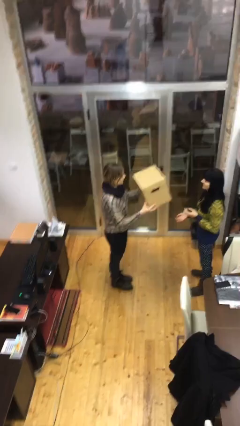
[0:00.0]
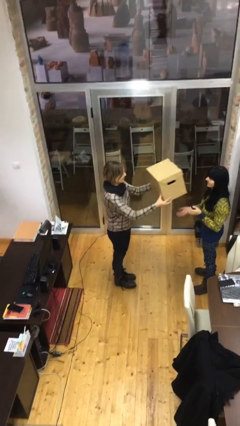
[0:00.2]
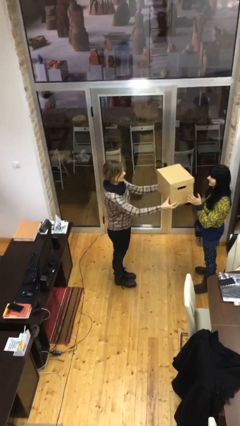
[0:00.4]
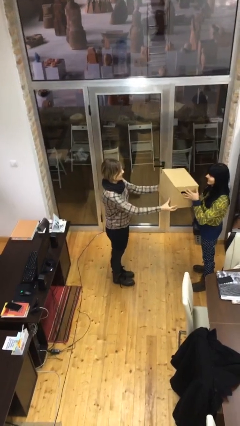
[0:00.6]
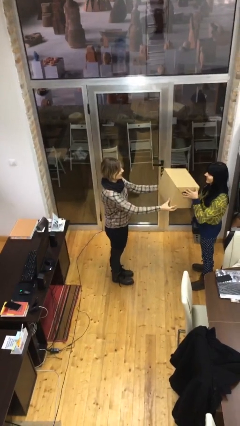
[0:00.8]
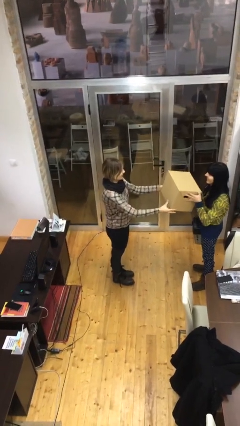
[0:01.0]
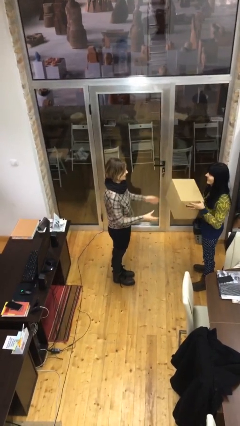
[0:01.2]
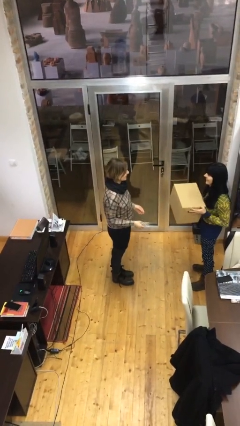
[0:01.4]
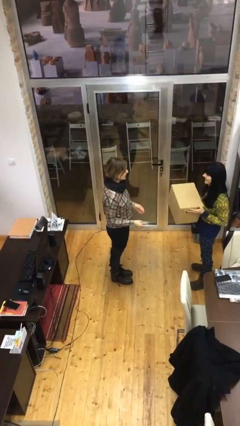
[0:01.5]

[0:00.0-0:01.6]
person transfers object to person

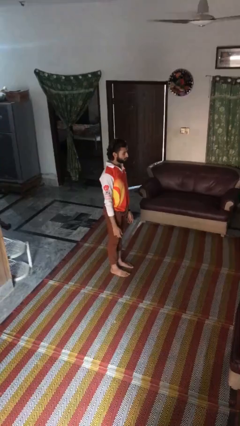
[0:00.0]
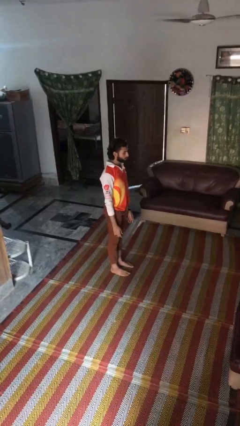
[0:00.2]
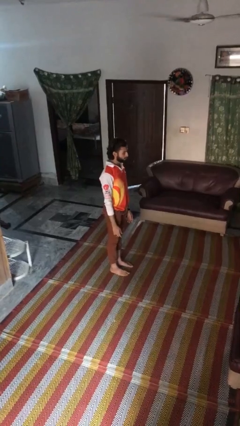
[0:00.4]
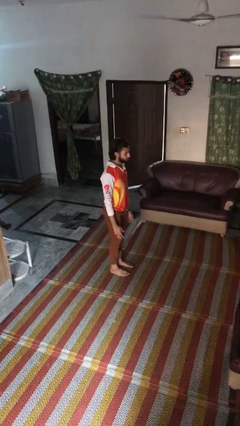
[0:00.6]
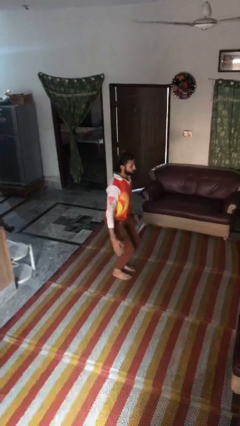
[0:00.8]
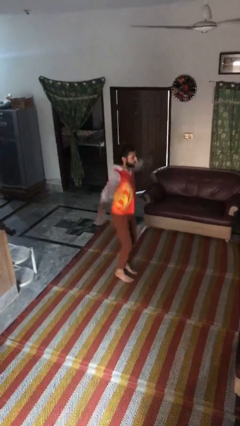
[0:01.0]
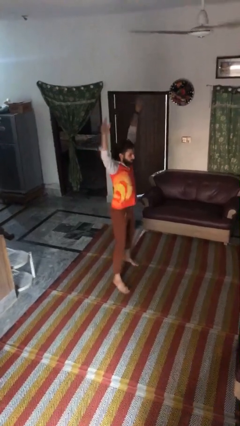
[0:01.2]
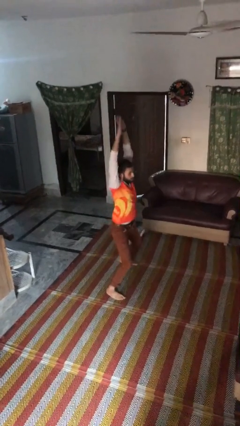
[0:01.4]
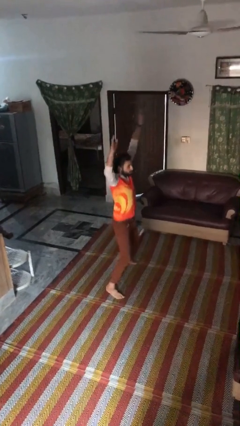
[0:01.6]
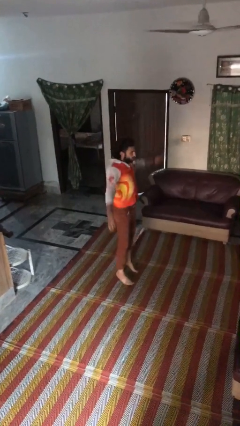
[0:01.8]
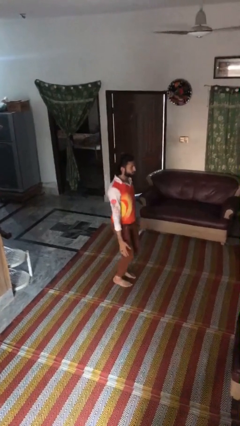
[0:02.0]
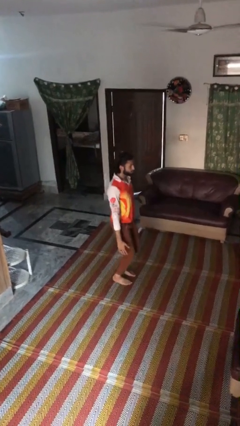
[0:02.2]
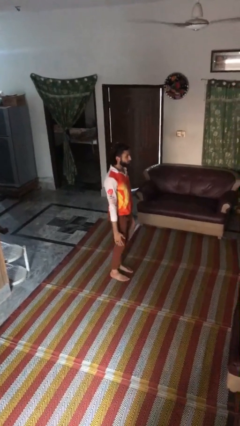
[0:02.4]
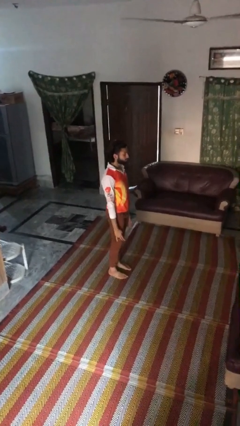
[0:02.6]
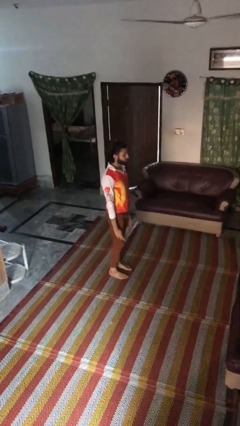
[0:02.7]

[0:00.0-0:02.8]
person exercises with jumping jacks

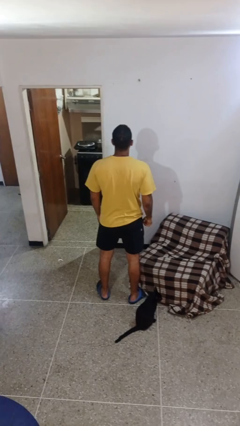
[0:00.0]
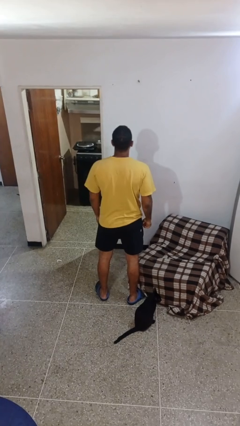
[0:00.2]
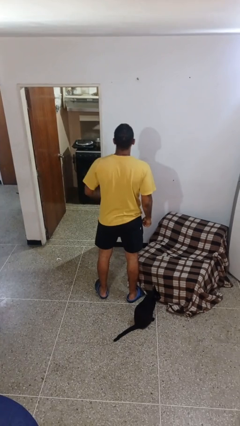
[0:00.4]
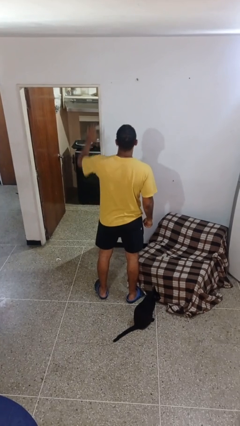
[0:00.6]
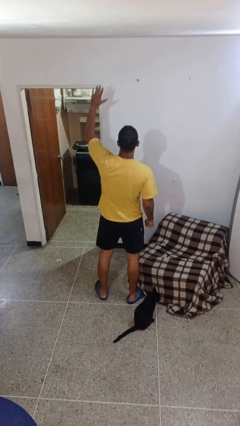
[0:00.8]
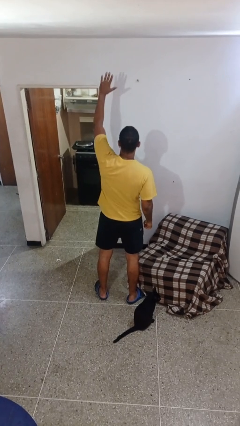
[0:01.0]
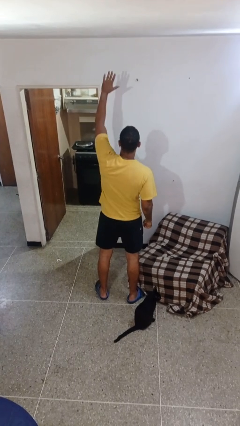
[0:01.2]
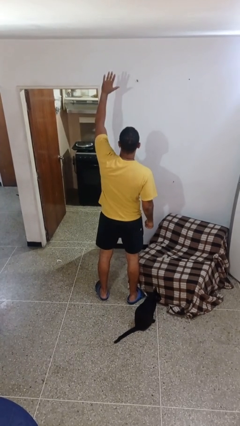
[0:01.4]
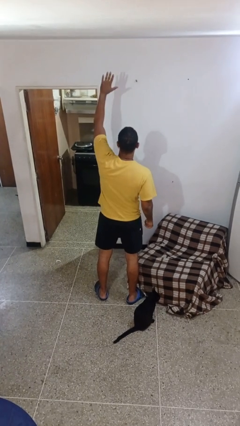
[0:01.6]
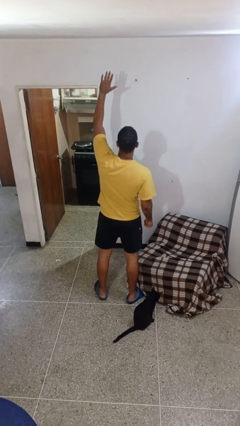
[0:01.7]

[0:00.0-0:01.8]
person gestures raise hand

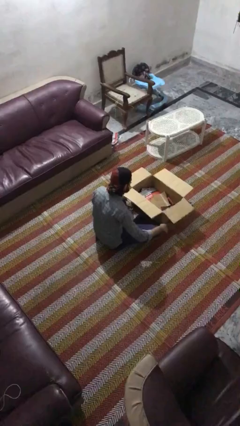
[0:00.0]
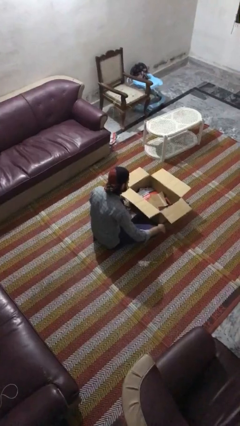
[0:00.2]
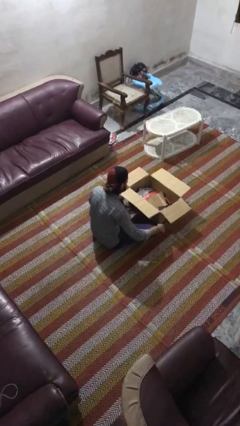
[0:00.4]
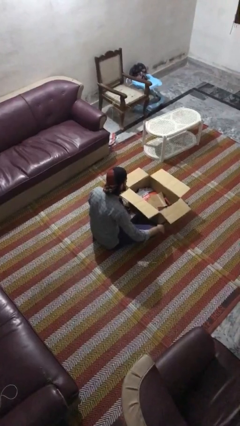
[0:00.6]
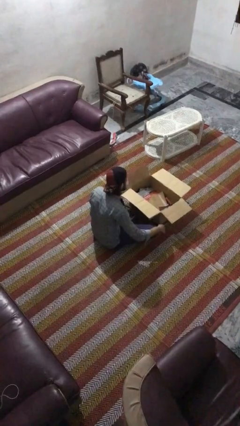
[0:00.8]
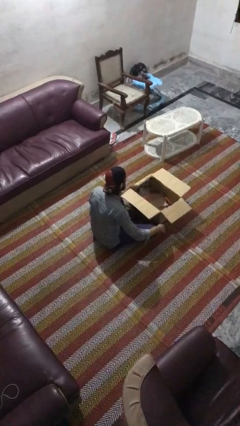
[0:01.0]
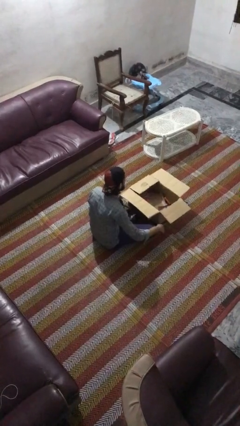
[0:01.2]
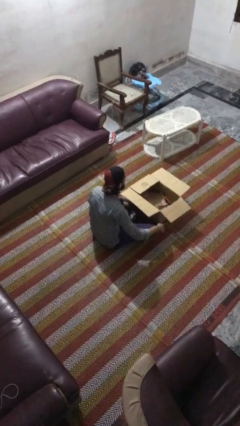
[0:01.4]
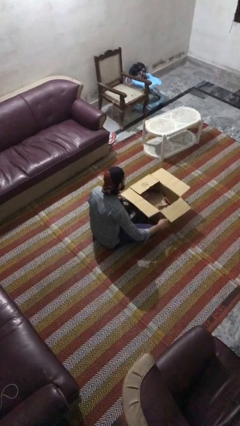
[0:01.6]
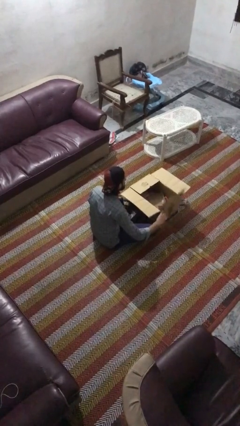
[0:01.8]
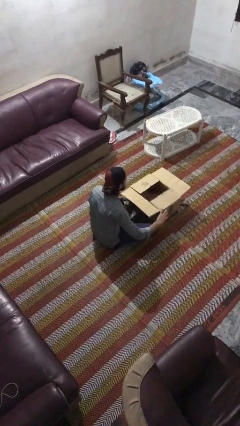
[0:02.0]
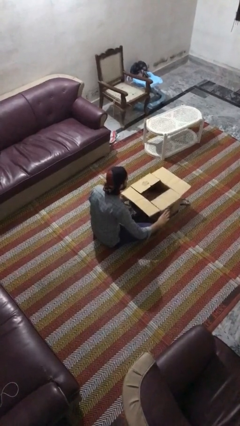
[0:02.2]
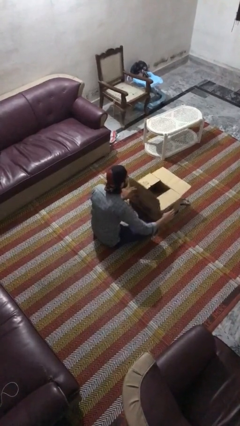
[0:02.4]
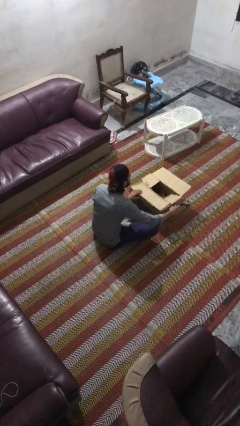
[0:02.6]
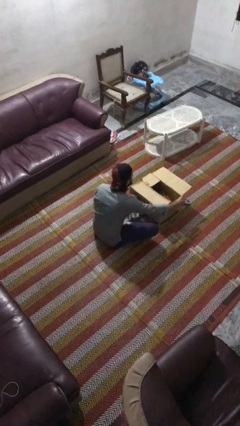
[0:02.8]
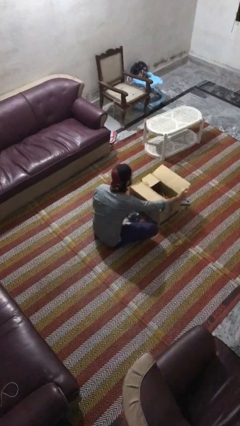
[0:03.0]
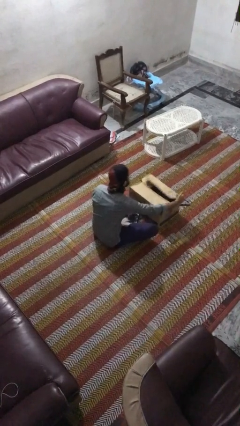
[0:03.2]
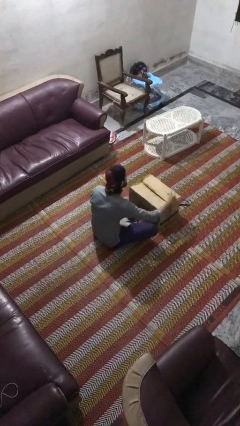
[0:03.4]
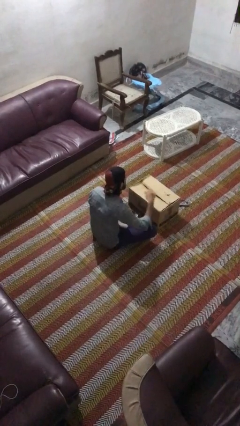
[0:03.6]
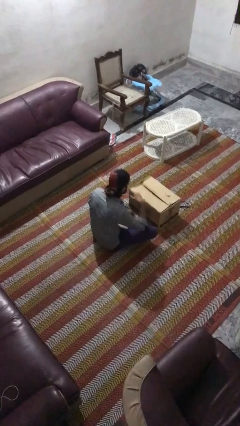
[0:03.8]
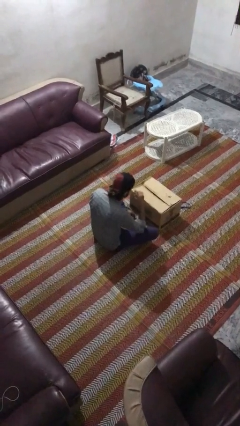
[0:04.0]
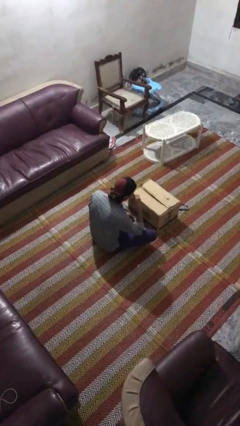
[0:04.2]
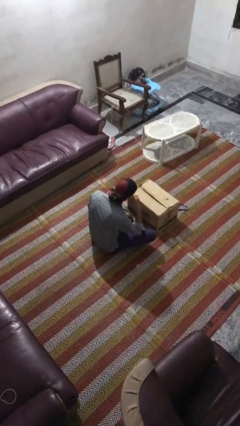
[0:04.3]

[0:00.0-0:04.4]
person closes box

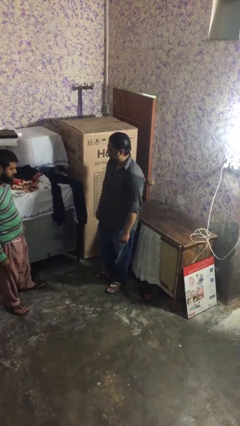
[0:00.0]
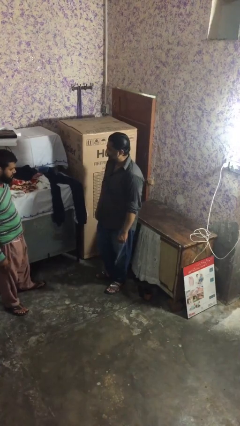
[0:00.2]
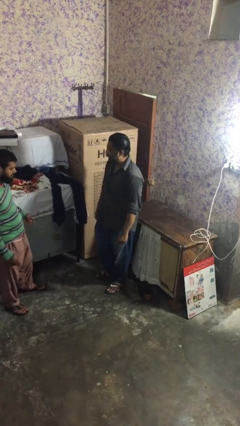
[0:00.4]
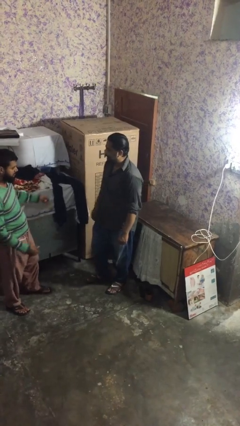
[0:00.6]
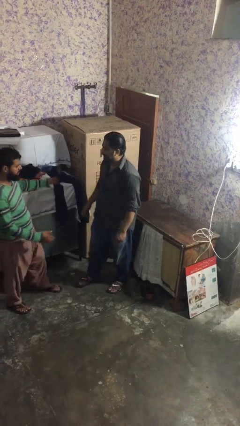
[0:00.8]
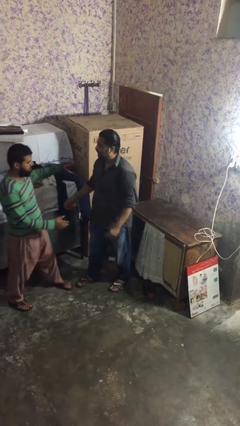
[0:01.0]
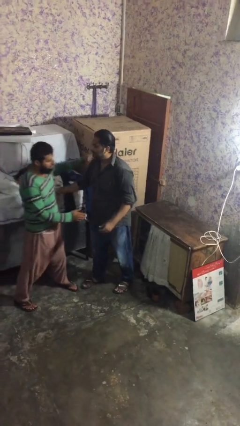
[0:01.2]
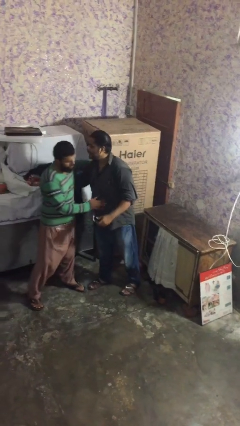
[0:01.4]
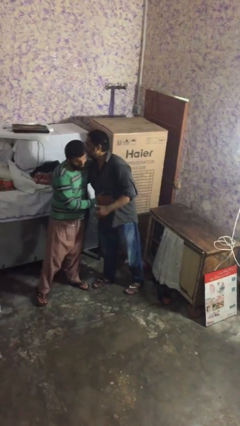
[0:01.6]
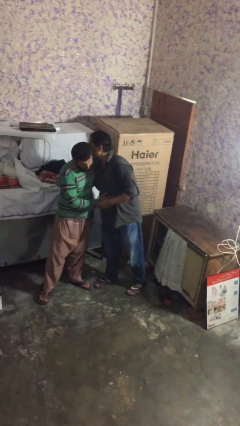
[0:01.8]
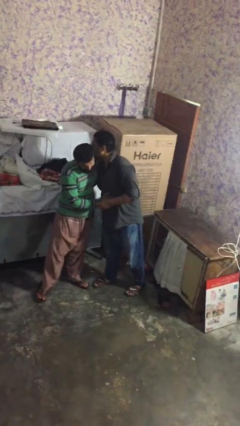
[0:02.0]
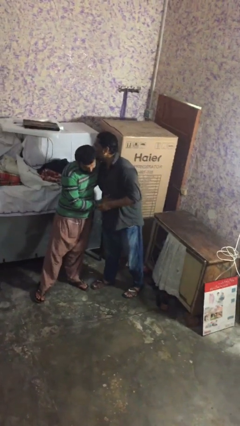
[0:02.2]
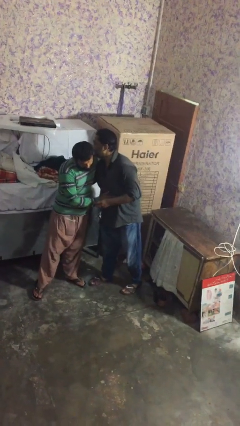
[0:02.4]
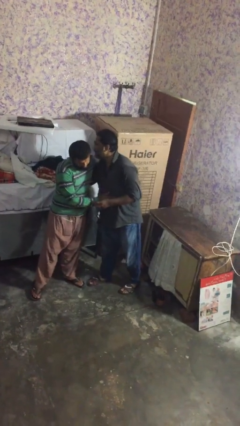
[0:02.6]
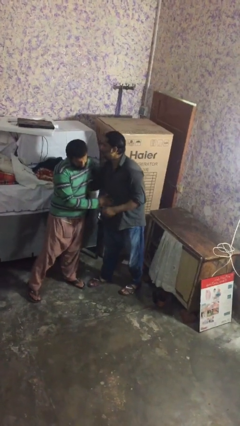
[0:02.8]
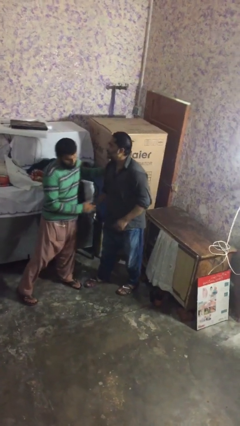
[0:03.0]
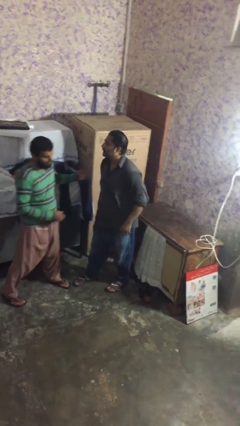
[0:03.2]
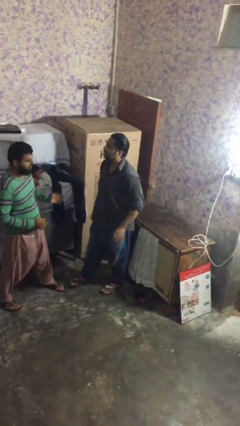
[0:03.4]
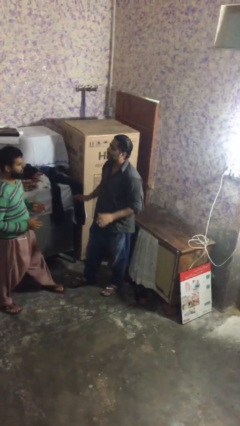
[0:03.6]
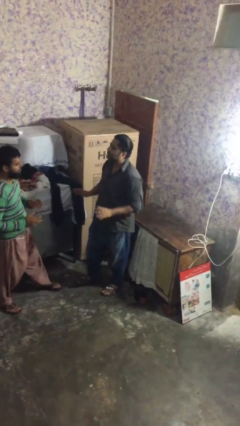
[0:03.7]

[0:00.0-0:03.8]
person embraces person

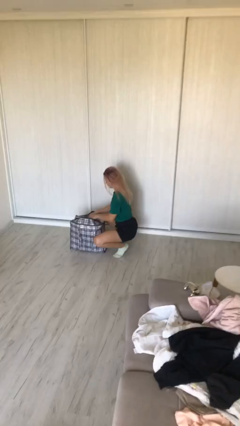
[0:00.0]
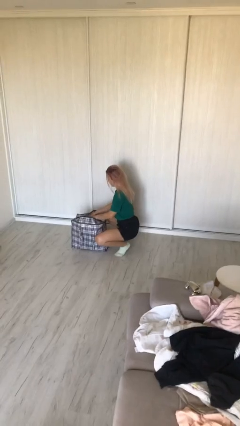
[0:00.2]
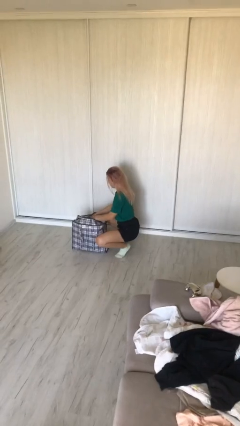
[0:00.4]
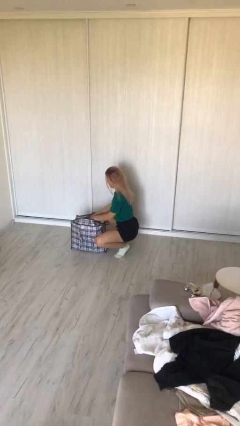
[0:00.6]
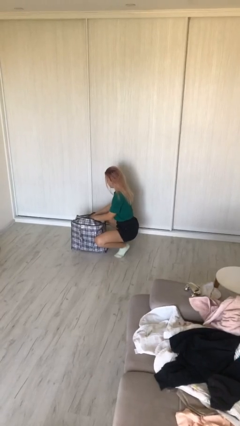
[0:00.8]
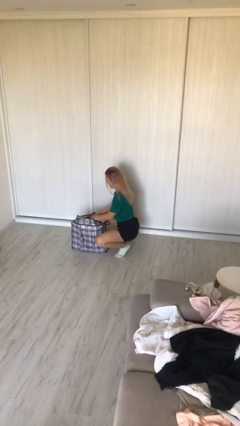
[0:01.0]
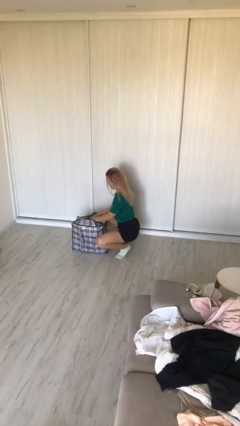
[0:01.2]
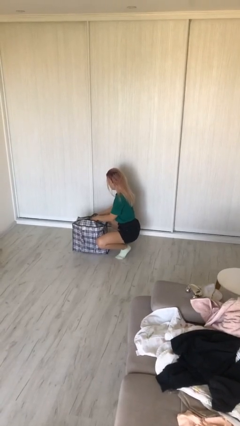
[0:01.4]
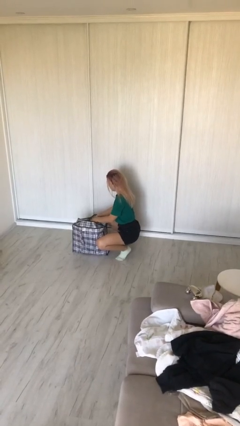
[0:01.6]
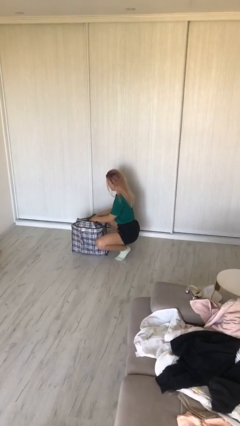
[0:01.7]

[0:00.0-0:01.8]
person searches in bag

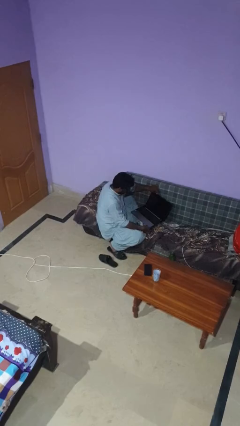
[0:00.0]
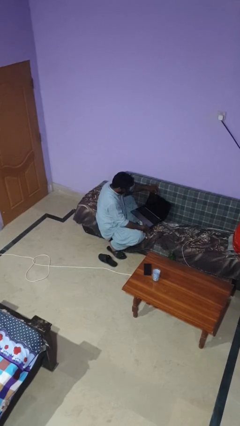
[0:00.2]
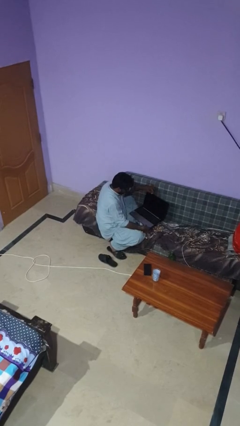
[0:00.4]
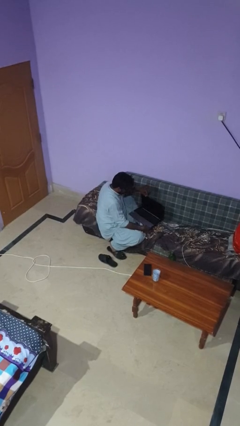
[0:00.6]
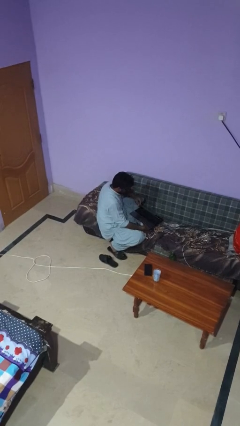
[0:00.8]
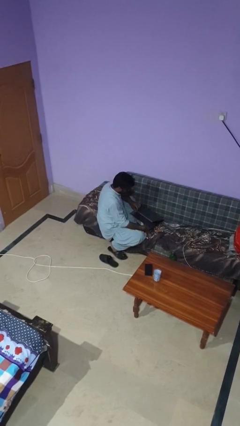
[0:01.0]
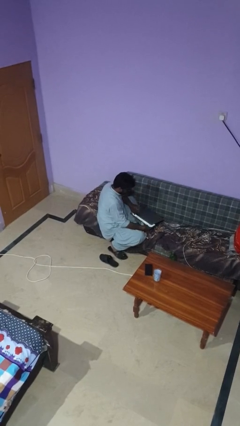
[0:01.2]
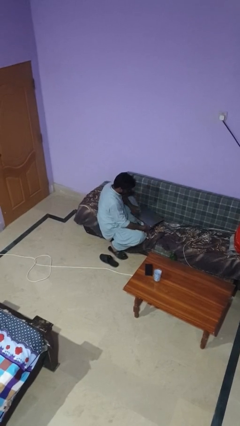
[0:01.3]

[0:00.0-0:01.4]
person closes laptop
